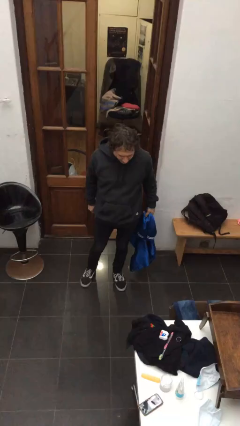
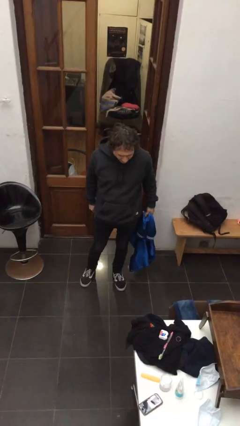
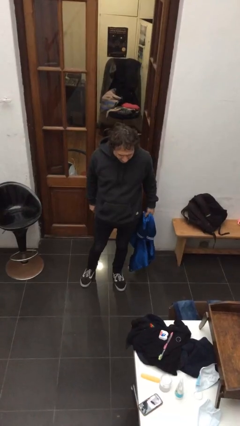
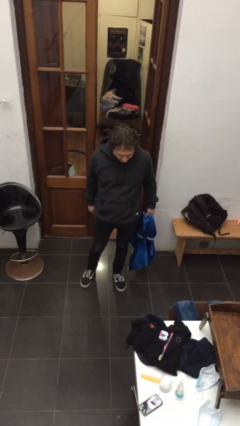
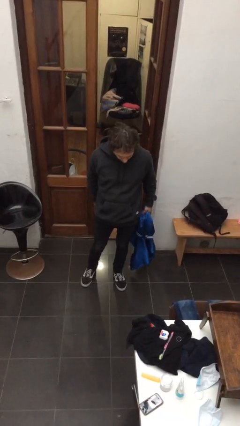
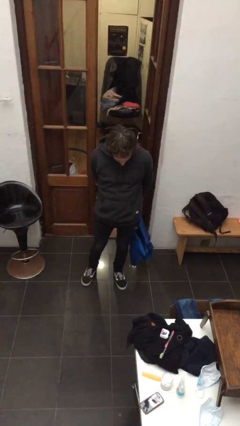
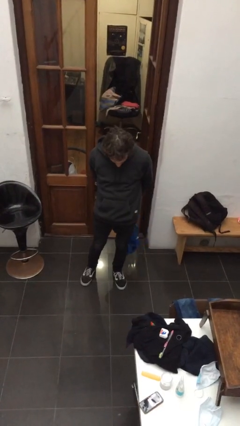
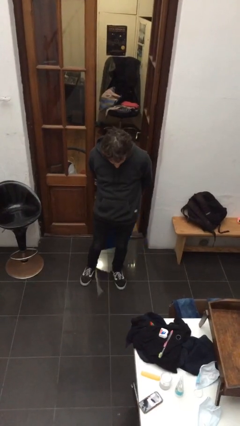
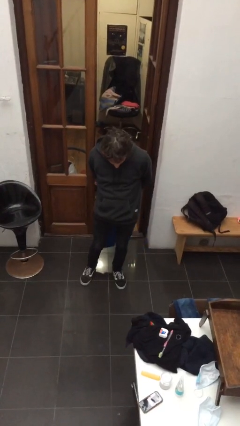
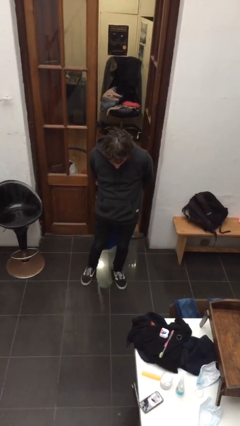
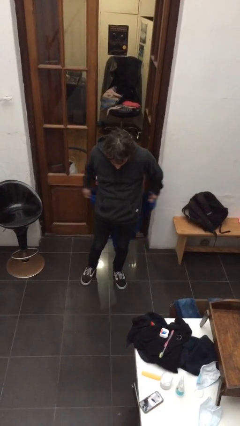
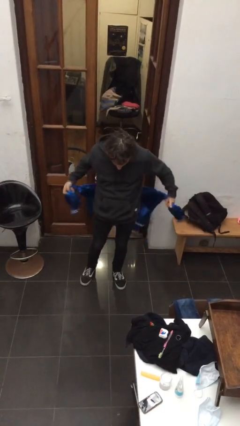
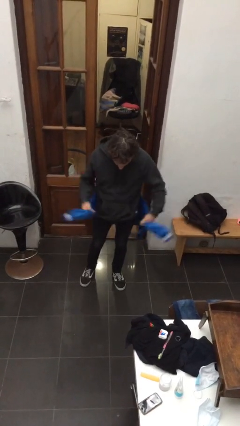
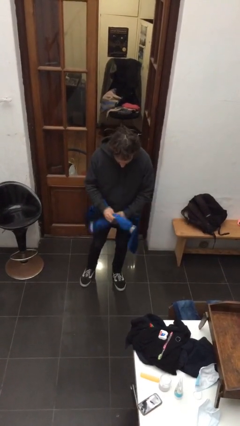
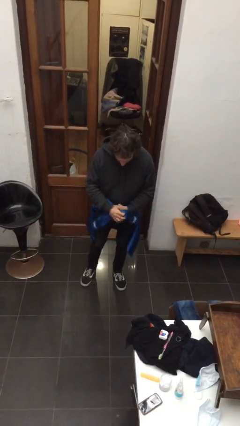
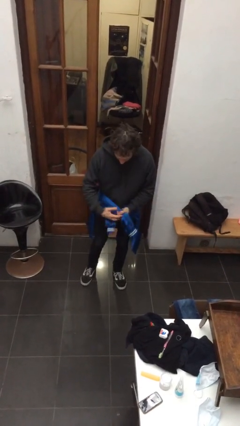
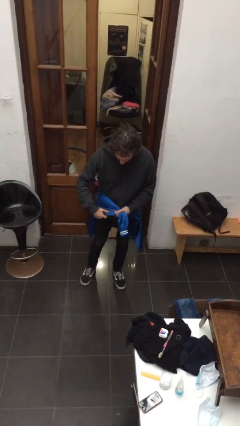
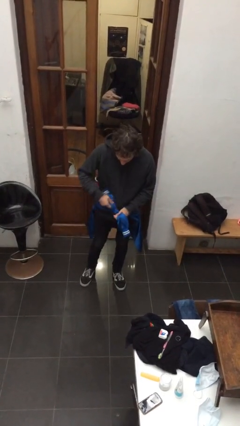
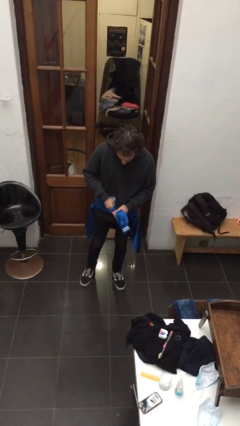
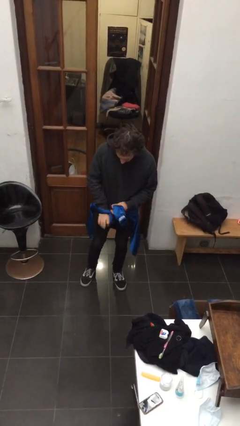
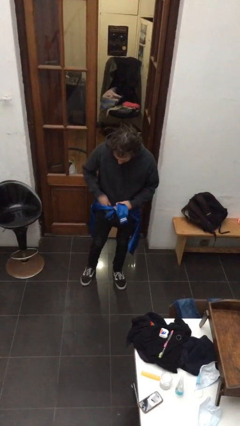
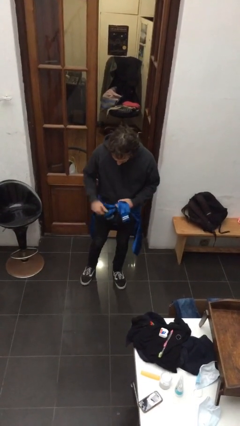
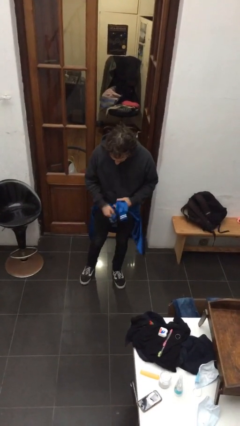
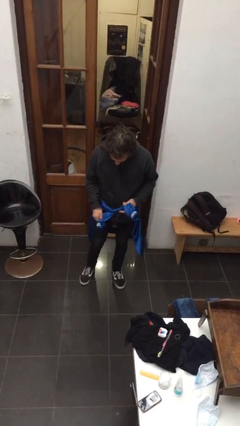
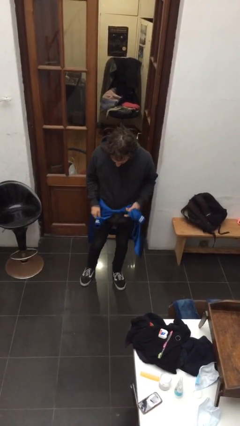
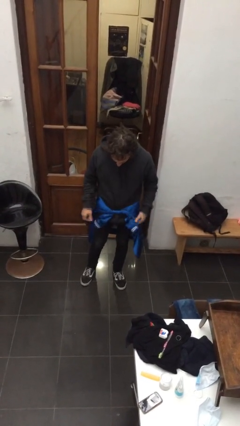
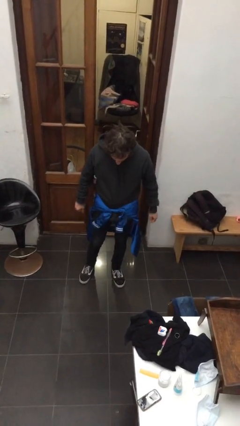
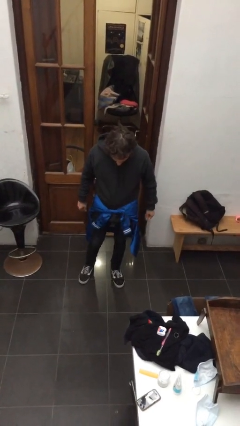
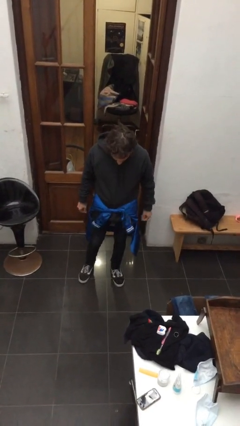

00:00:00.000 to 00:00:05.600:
person ties jacket around waist

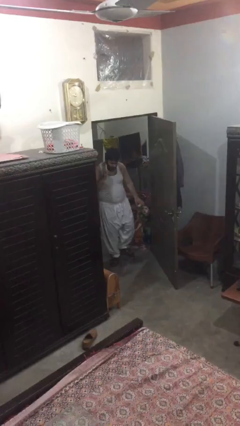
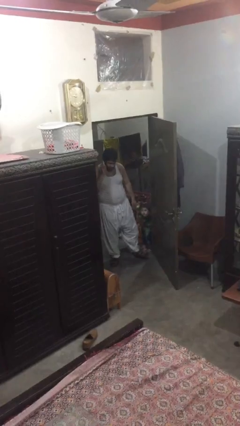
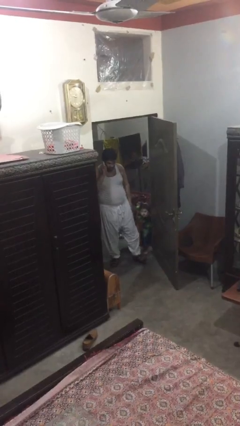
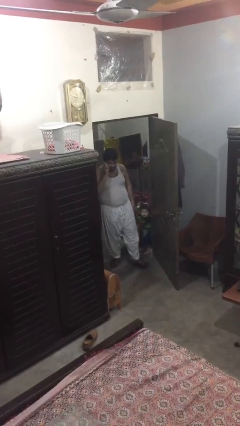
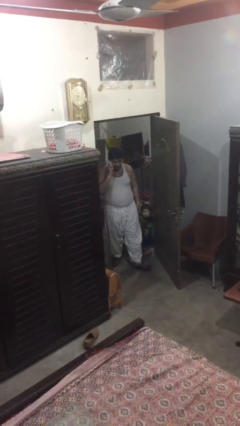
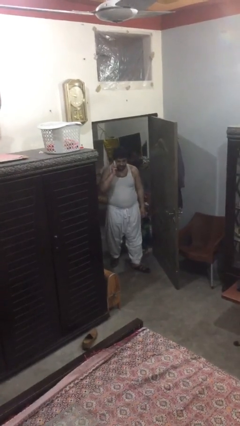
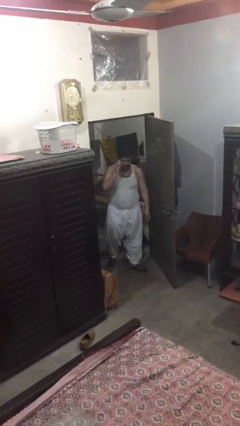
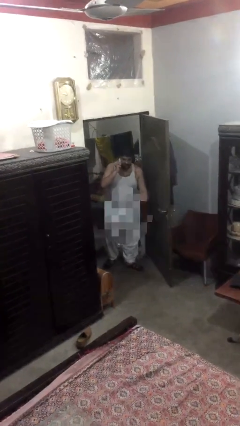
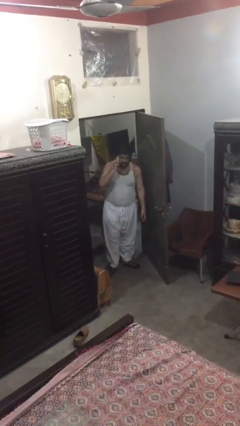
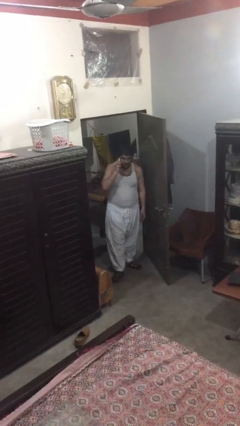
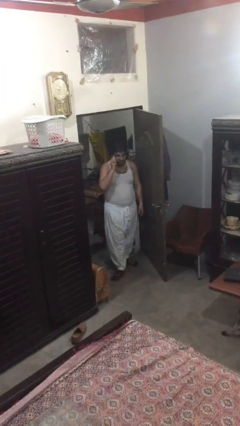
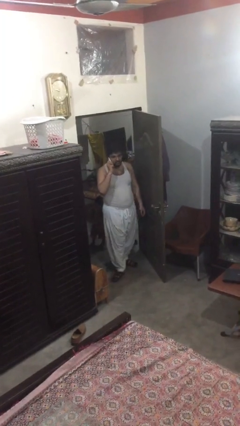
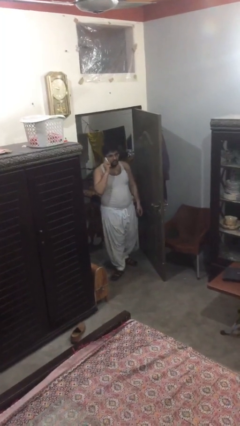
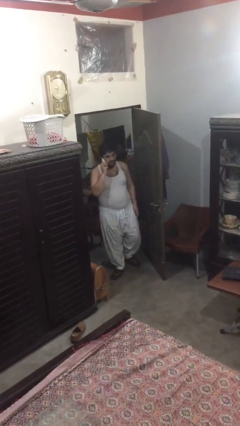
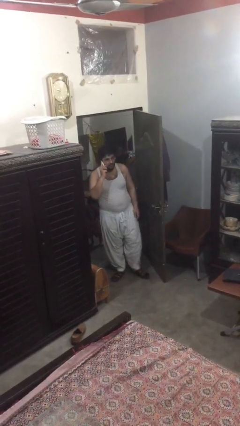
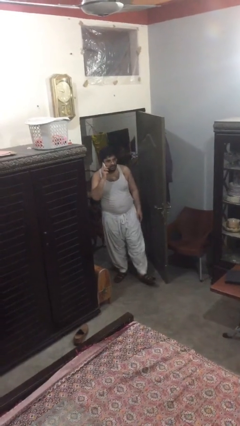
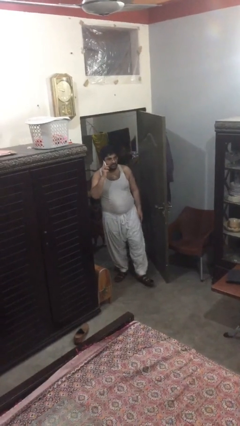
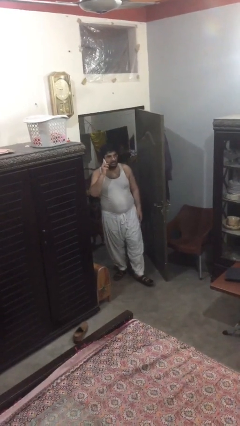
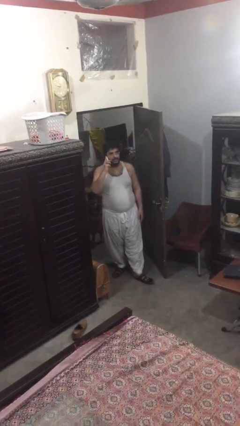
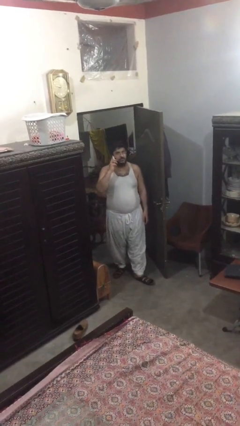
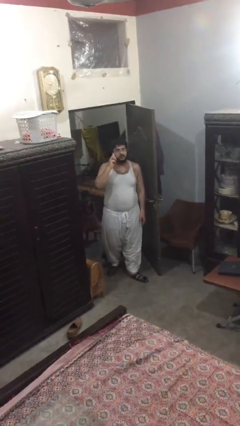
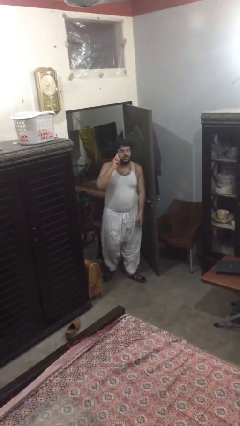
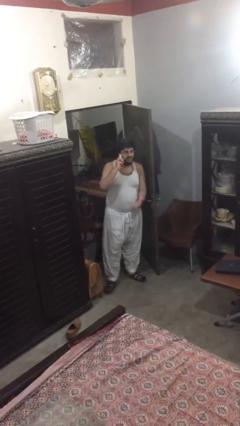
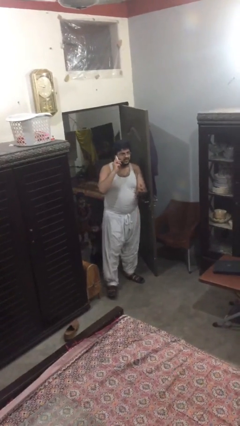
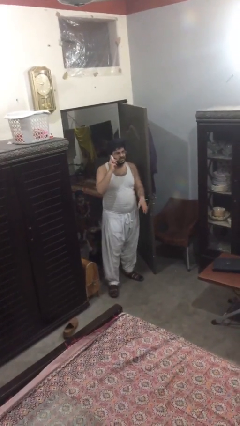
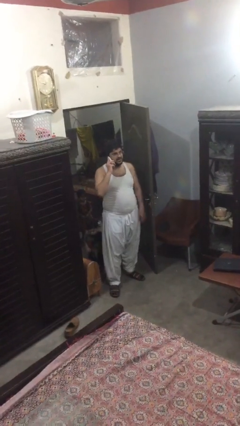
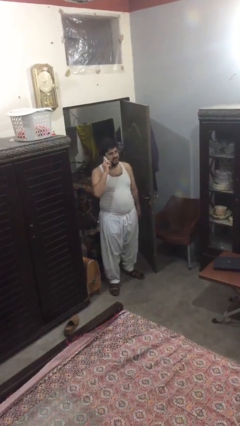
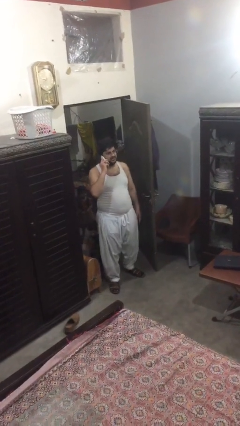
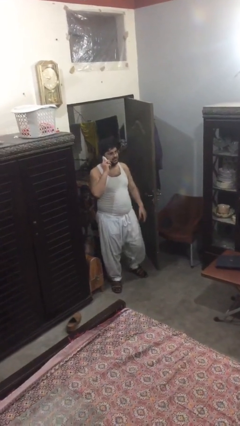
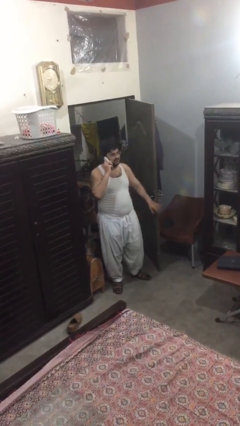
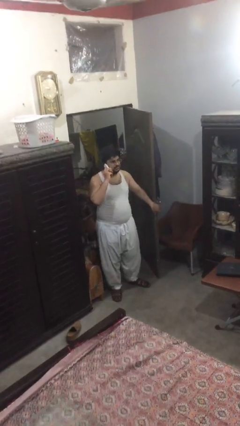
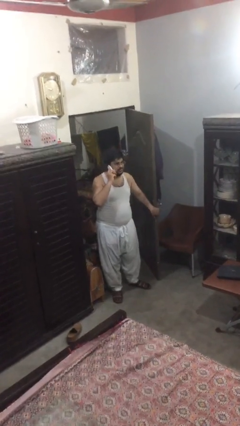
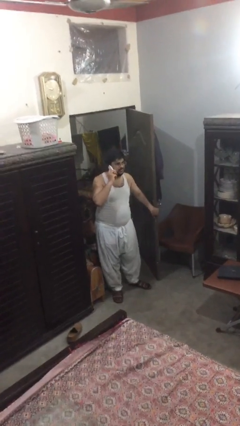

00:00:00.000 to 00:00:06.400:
person enters scene through structure

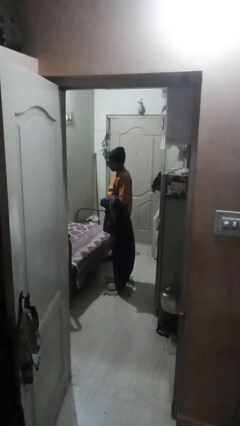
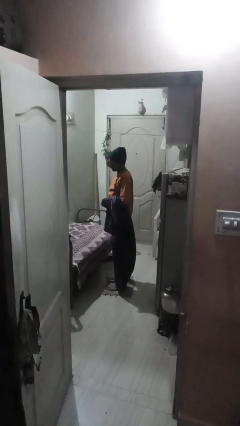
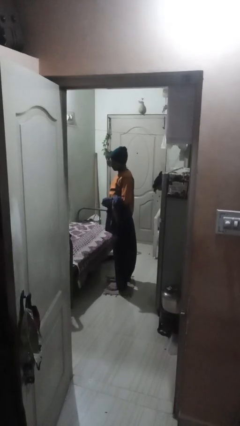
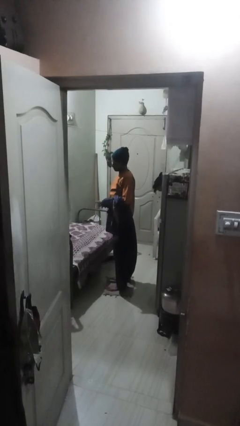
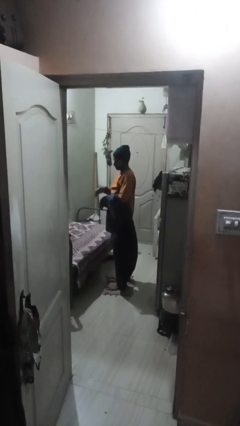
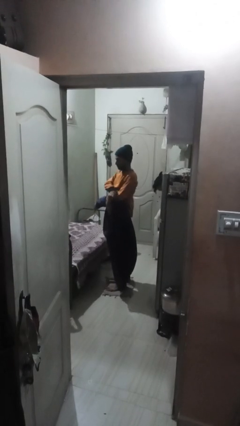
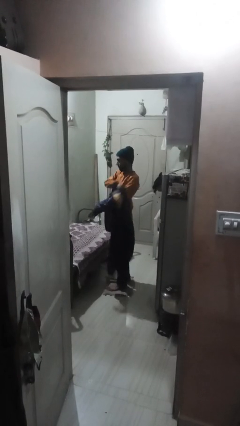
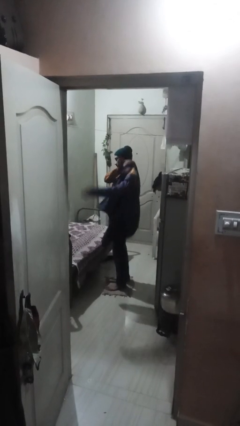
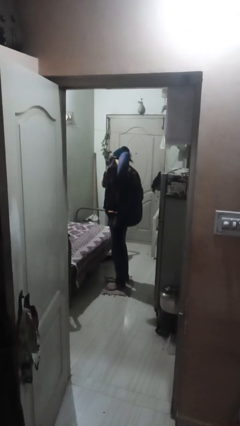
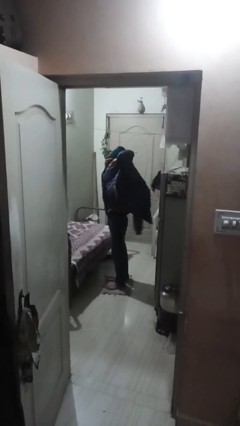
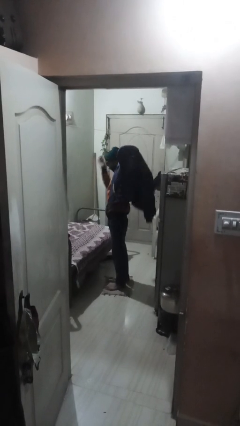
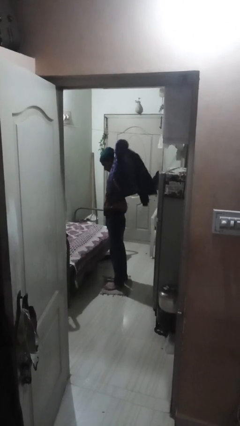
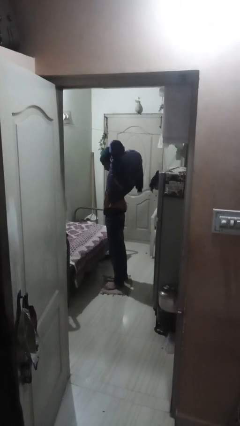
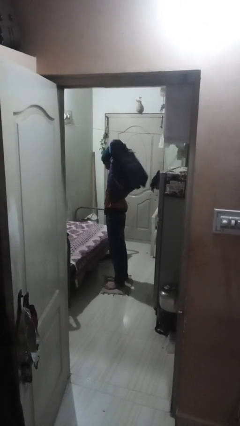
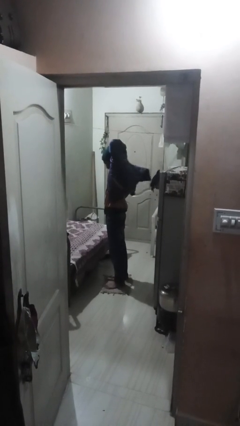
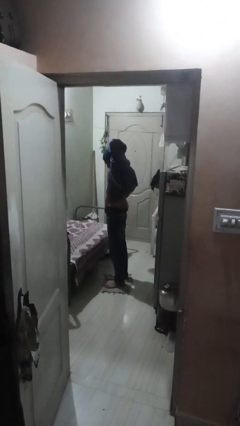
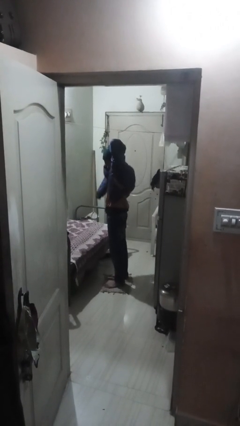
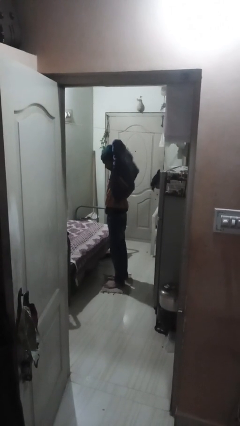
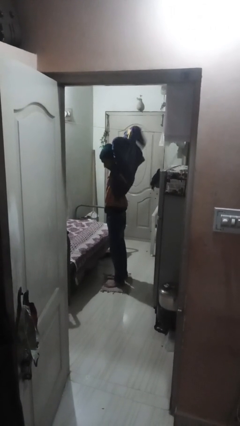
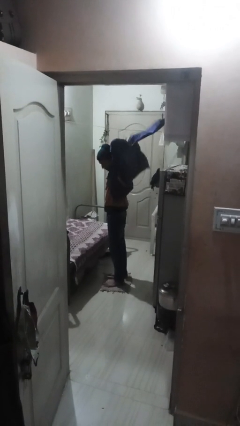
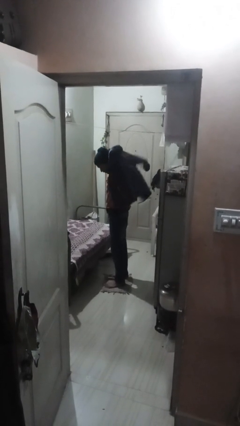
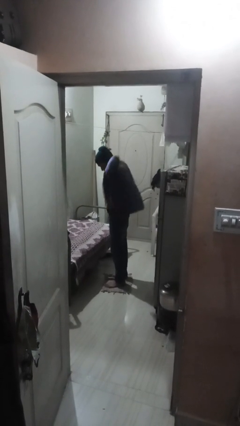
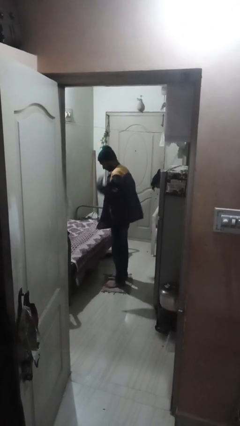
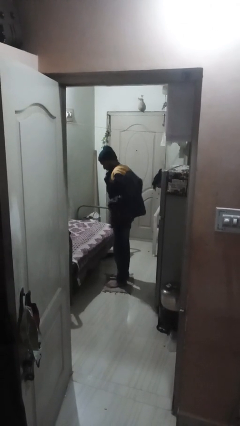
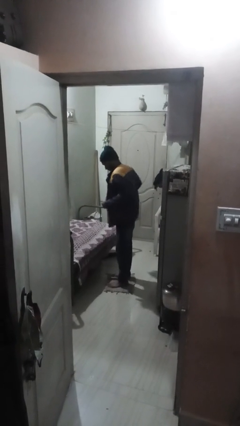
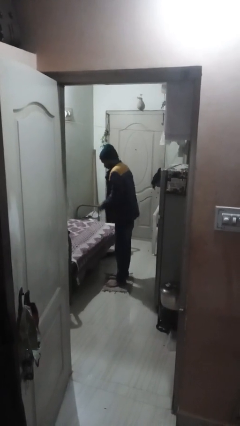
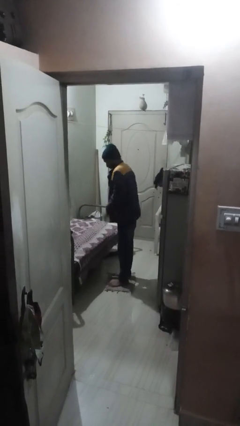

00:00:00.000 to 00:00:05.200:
person puts on jacket

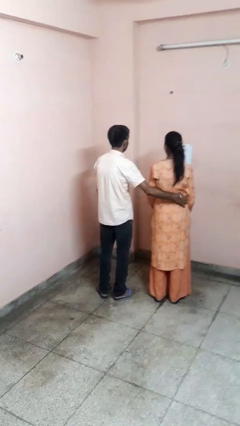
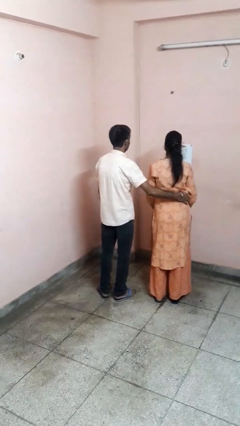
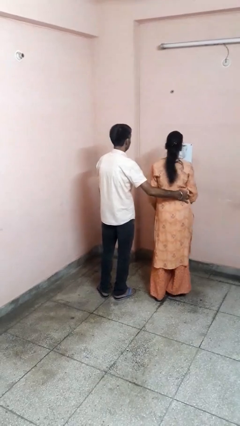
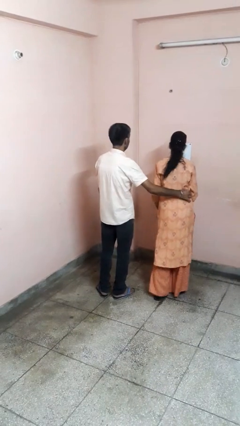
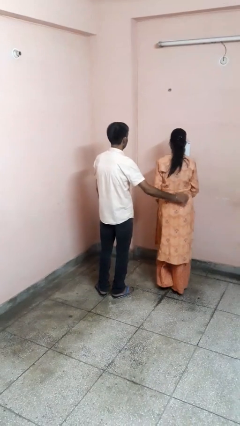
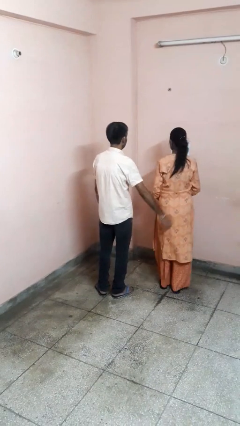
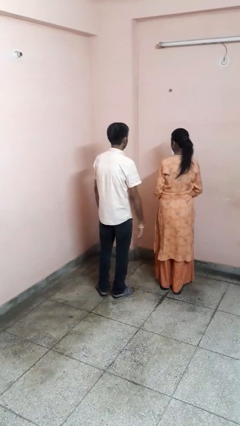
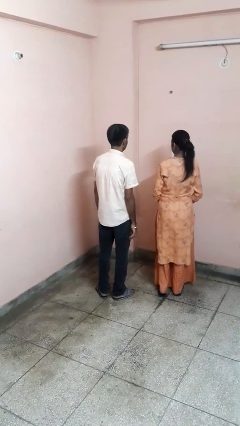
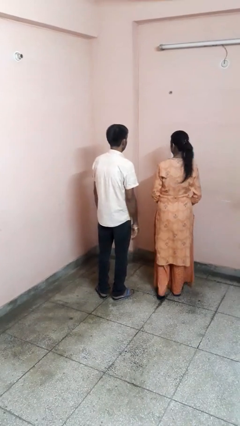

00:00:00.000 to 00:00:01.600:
person tickles person
